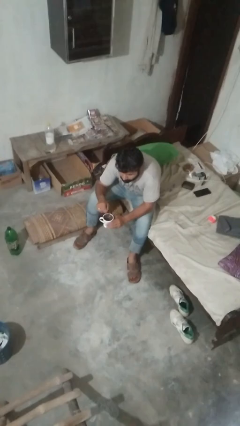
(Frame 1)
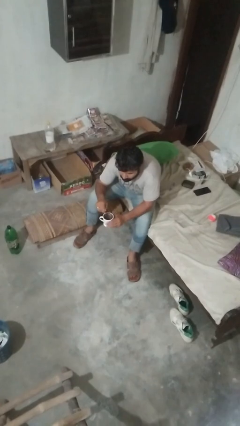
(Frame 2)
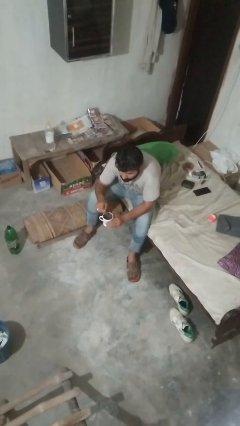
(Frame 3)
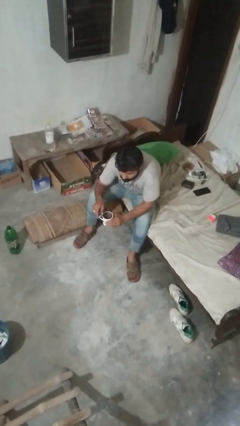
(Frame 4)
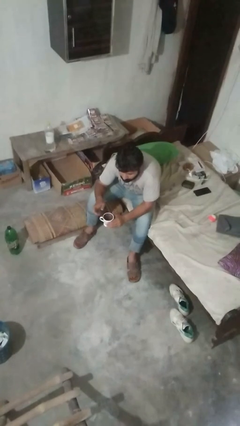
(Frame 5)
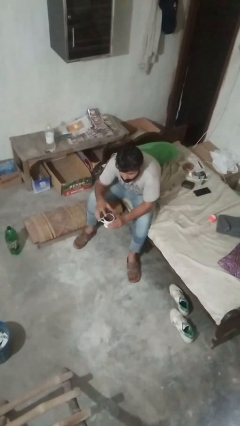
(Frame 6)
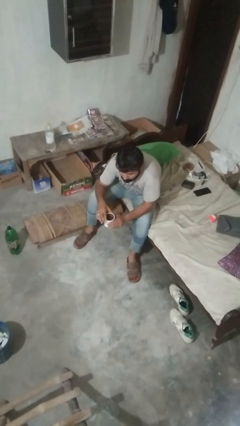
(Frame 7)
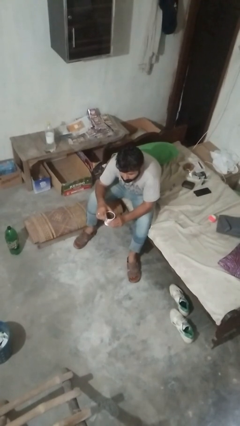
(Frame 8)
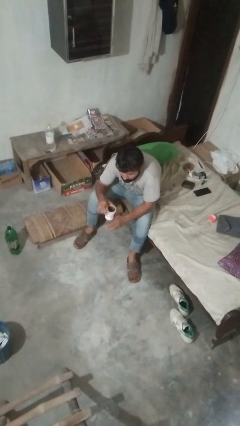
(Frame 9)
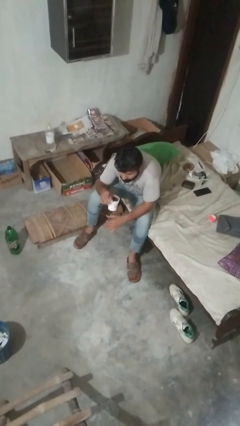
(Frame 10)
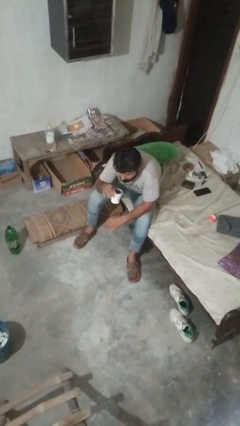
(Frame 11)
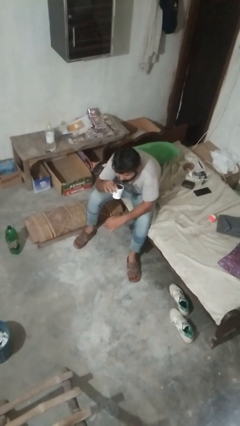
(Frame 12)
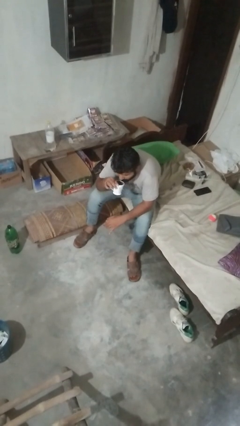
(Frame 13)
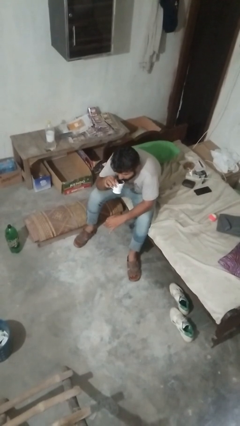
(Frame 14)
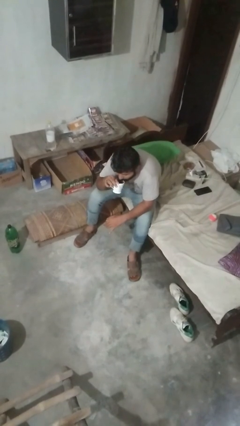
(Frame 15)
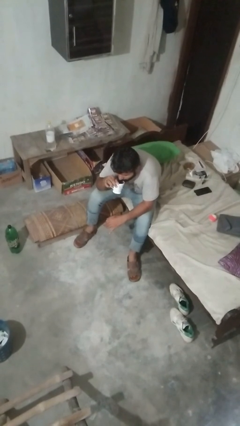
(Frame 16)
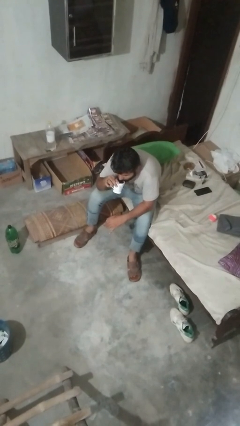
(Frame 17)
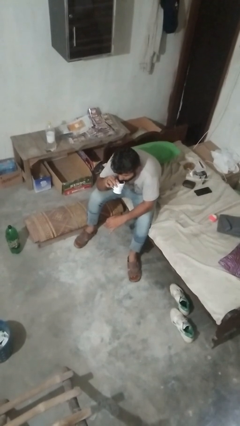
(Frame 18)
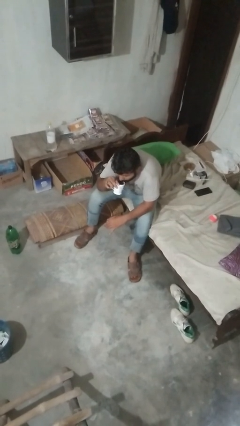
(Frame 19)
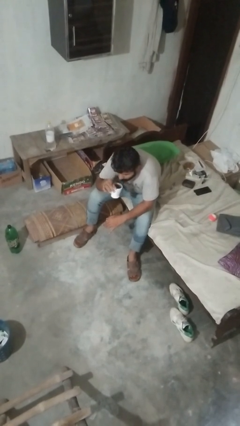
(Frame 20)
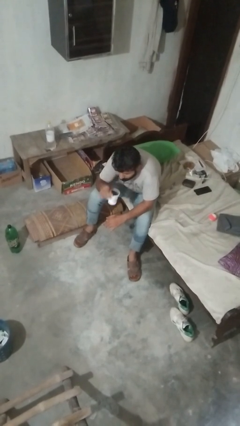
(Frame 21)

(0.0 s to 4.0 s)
person drinks from mug

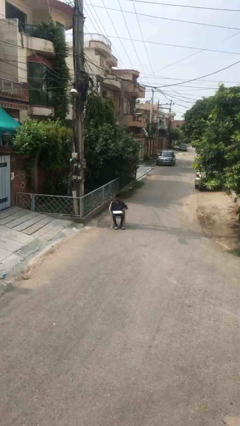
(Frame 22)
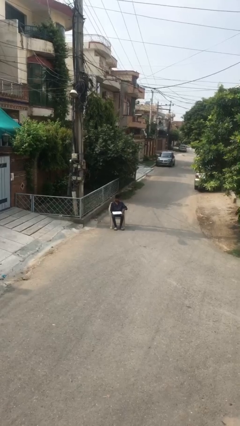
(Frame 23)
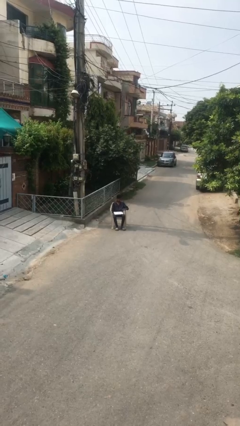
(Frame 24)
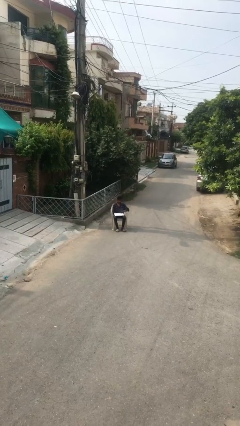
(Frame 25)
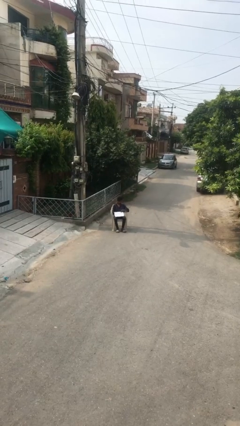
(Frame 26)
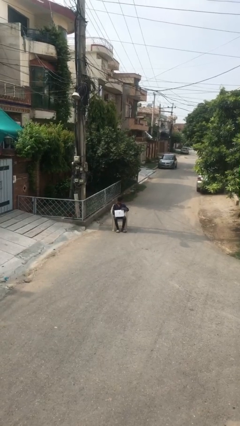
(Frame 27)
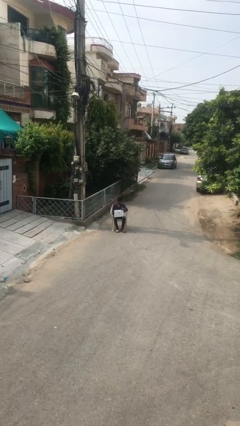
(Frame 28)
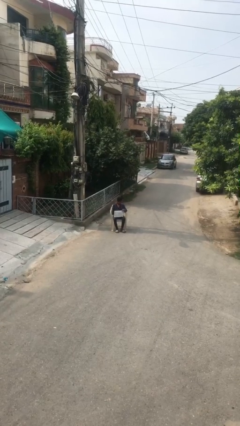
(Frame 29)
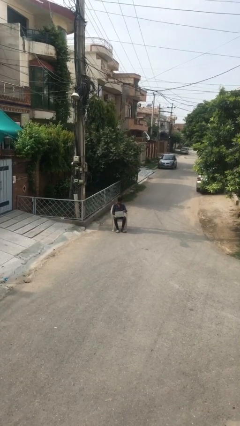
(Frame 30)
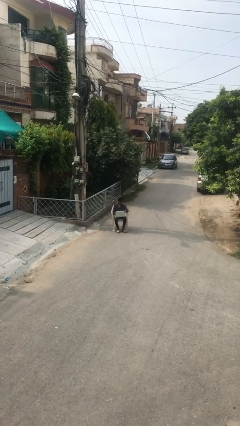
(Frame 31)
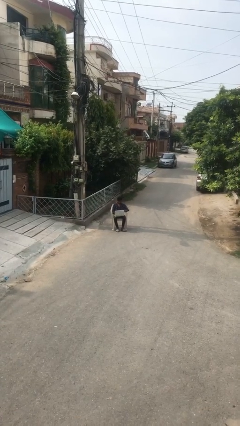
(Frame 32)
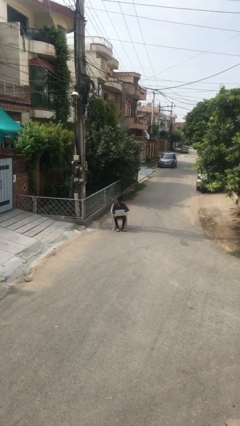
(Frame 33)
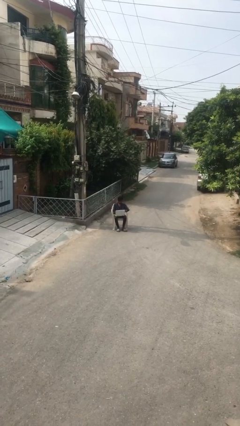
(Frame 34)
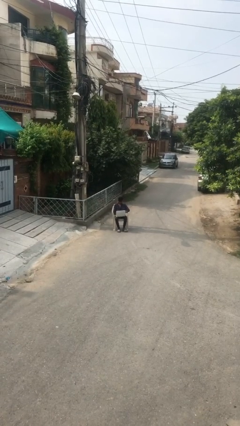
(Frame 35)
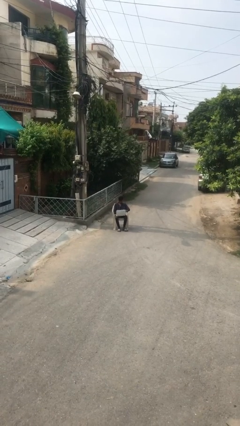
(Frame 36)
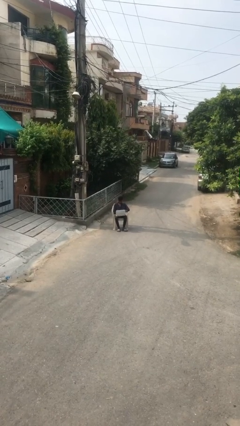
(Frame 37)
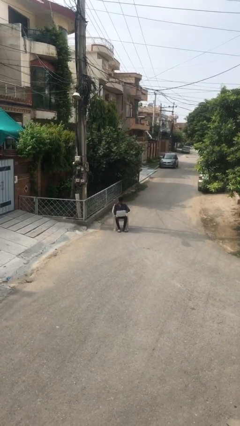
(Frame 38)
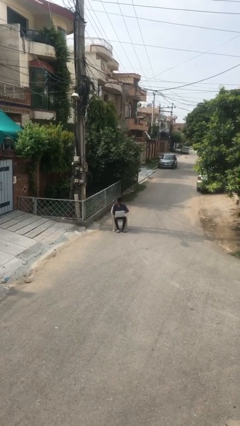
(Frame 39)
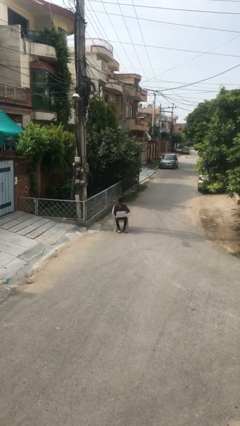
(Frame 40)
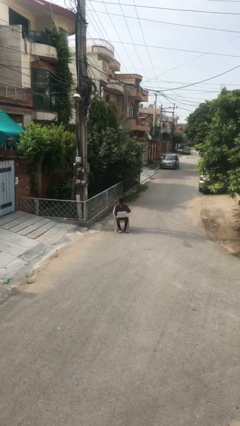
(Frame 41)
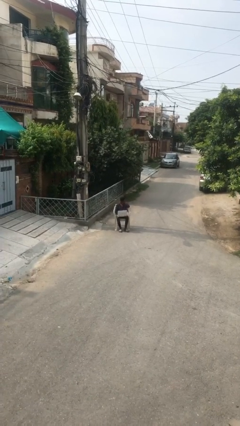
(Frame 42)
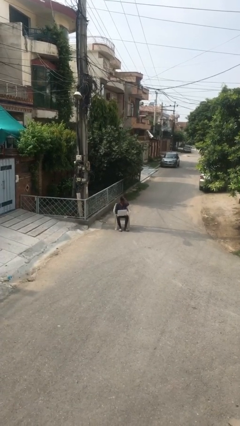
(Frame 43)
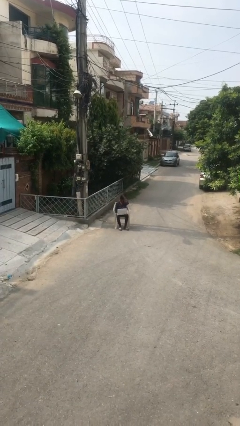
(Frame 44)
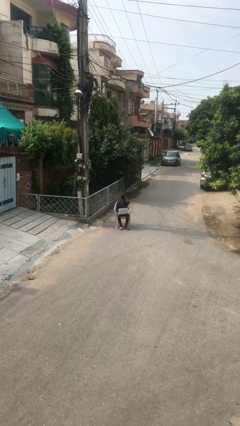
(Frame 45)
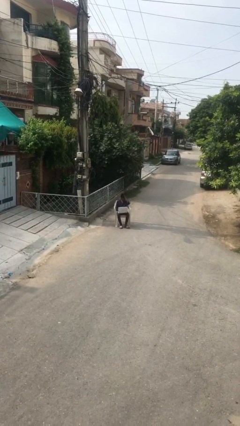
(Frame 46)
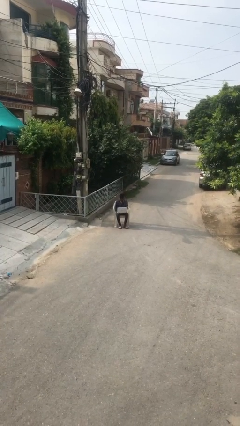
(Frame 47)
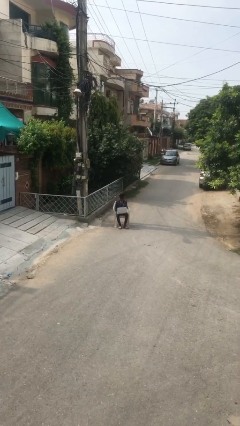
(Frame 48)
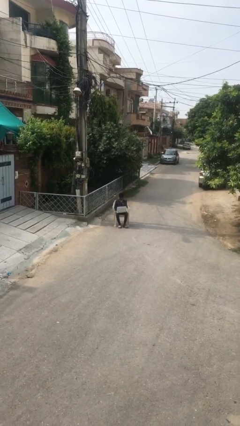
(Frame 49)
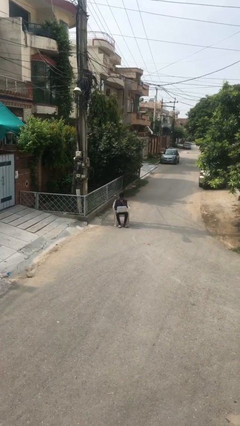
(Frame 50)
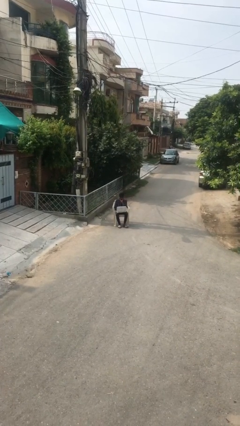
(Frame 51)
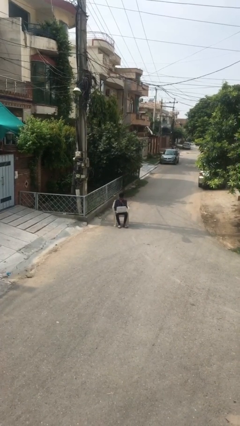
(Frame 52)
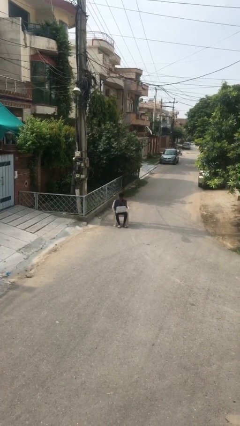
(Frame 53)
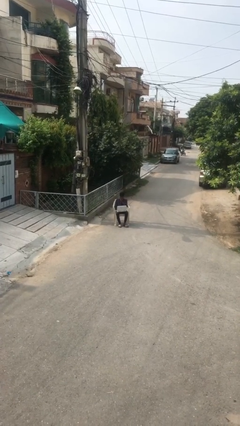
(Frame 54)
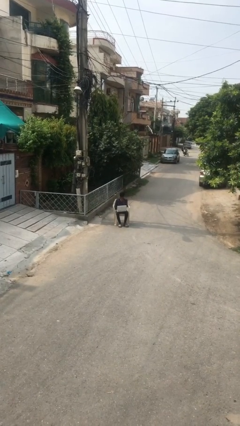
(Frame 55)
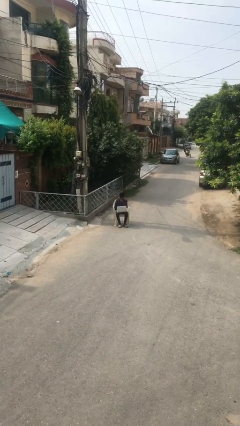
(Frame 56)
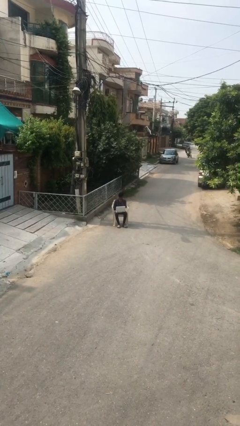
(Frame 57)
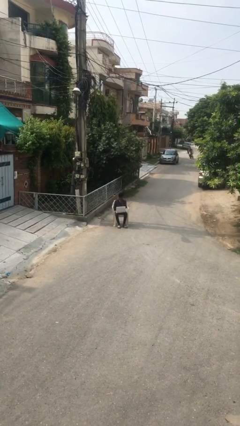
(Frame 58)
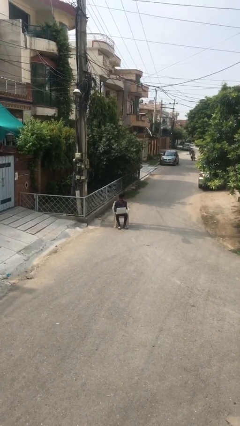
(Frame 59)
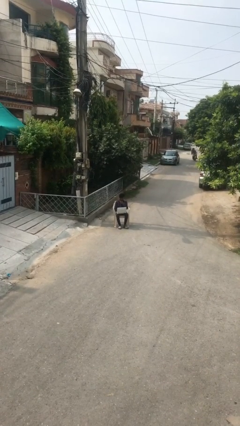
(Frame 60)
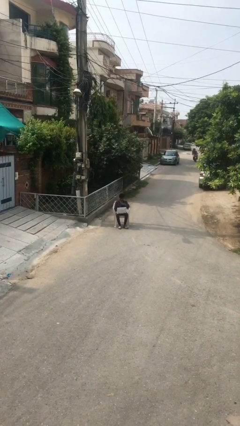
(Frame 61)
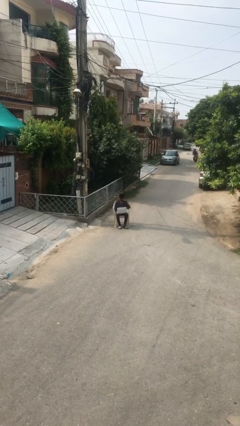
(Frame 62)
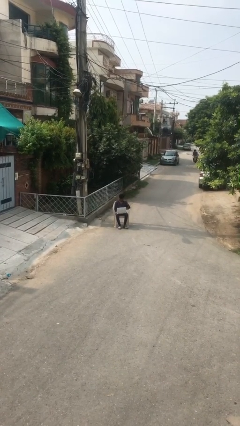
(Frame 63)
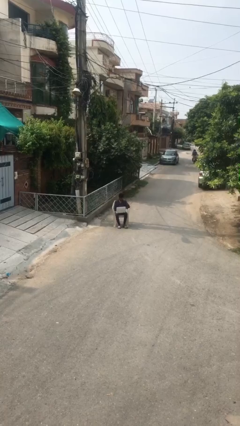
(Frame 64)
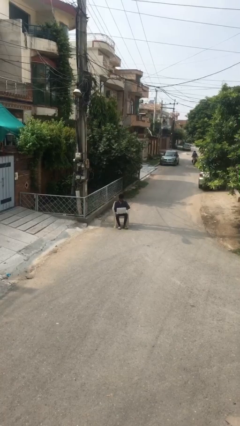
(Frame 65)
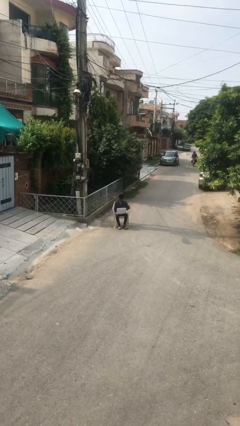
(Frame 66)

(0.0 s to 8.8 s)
person interacts with laptop

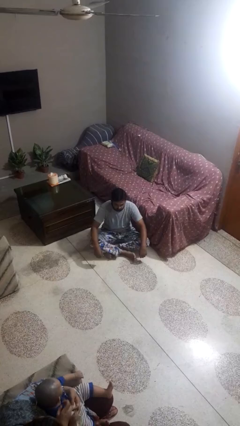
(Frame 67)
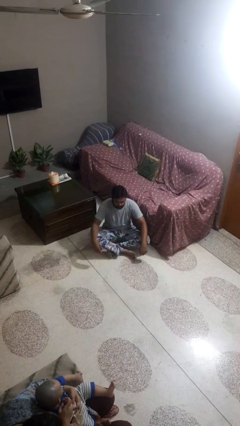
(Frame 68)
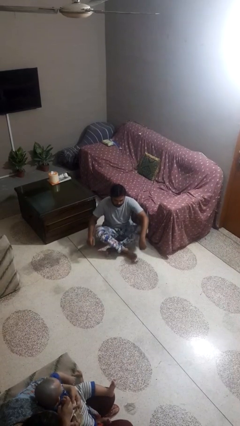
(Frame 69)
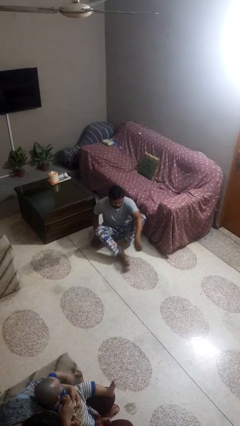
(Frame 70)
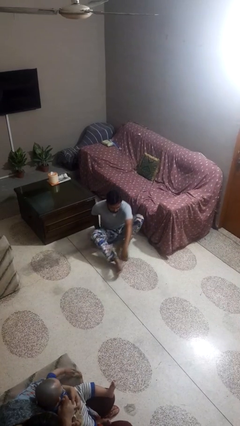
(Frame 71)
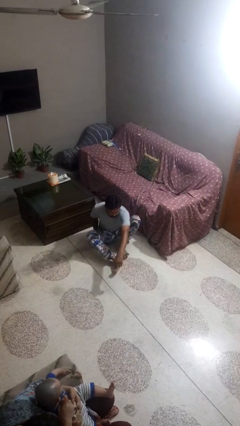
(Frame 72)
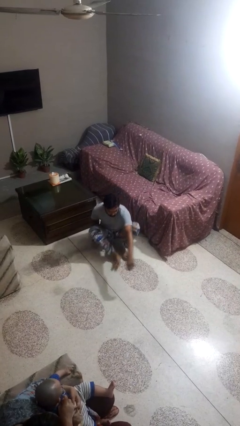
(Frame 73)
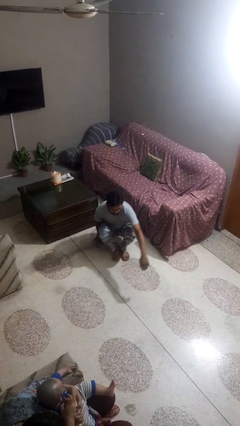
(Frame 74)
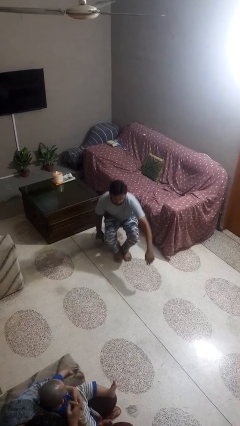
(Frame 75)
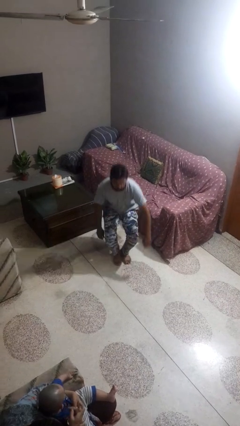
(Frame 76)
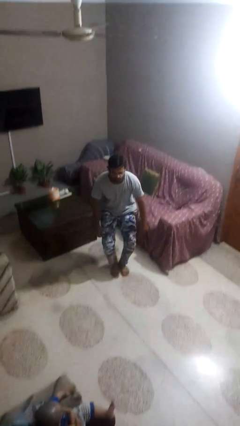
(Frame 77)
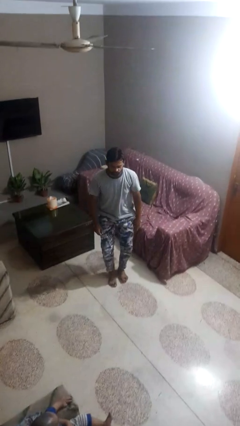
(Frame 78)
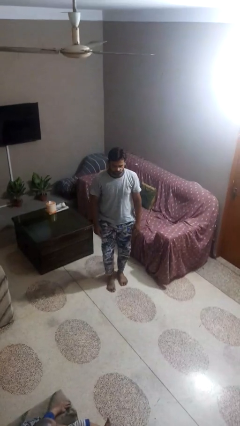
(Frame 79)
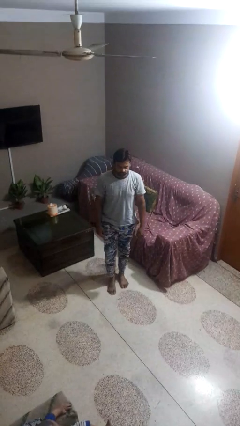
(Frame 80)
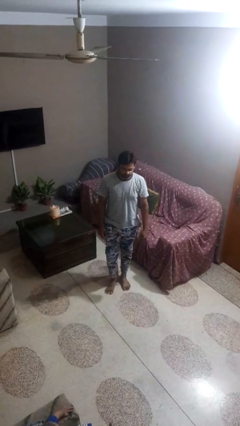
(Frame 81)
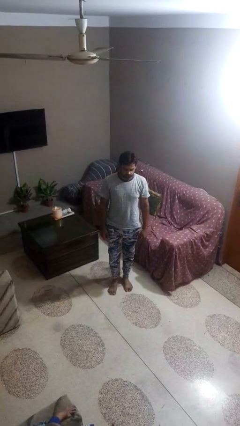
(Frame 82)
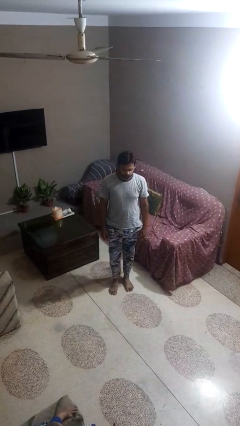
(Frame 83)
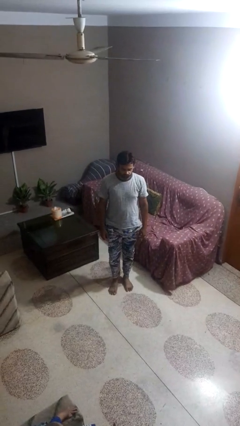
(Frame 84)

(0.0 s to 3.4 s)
person stands up from floor

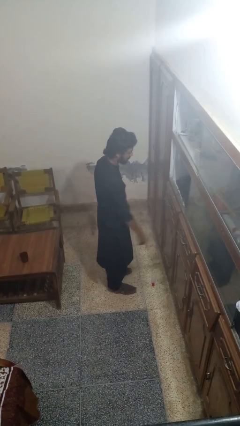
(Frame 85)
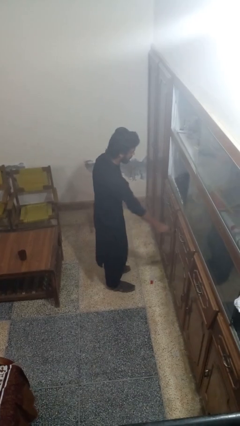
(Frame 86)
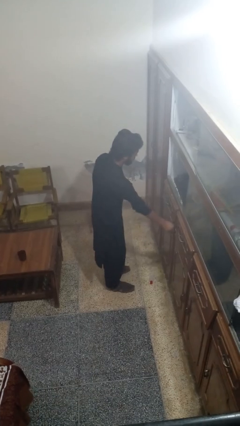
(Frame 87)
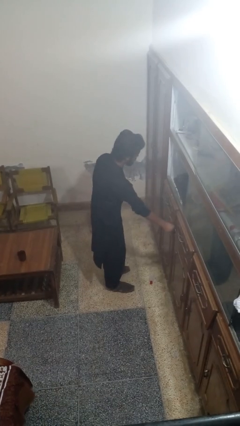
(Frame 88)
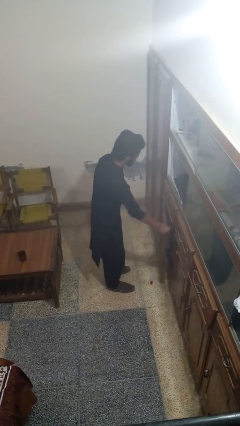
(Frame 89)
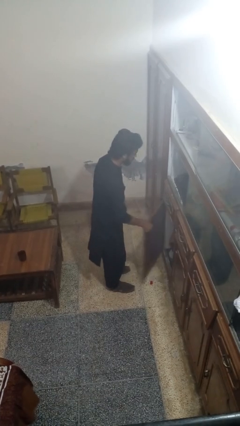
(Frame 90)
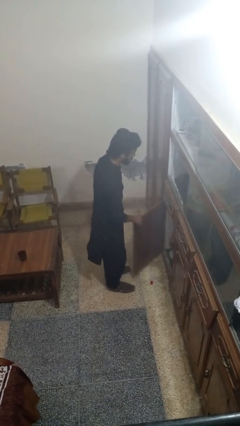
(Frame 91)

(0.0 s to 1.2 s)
person opens cabinet
